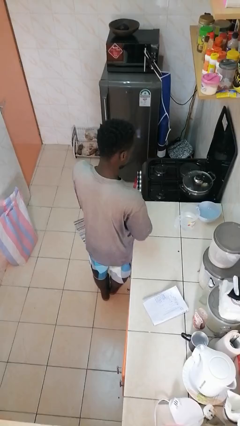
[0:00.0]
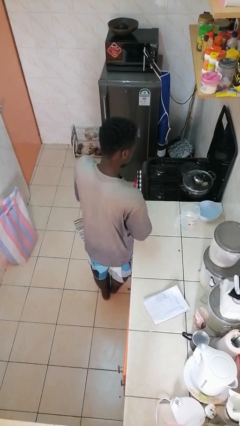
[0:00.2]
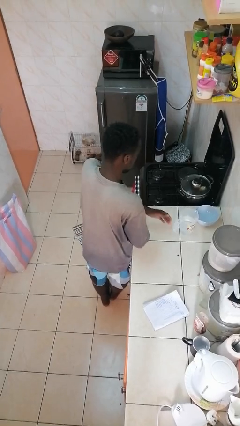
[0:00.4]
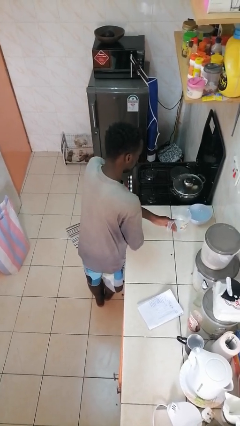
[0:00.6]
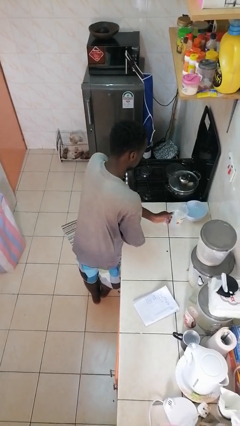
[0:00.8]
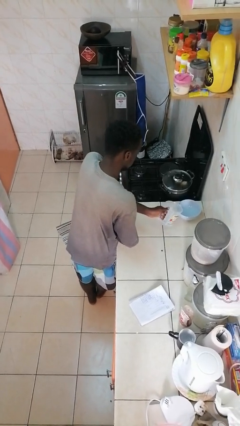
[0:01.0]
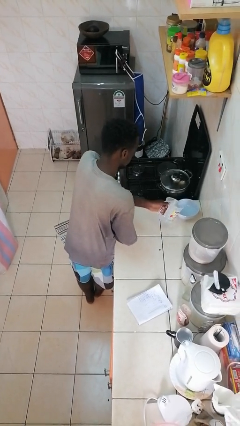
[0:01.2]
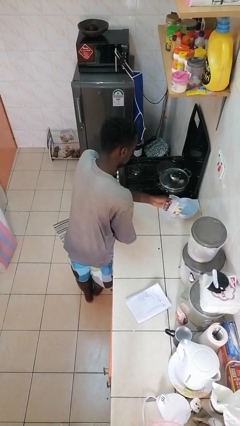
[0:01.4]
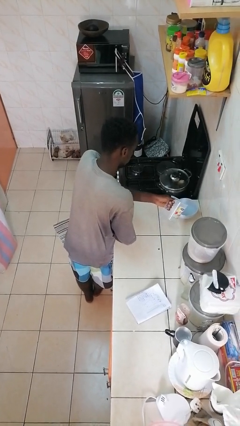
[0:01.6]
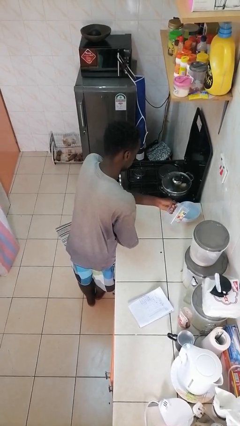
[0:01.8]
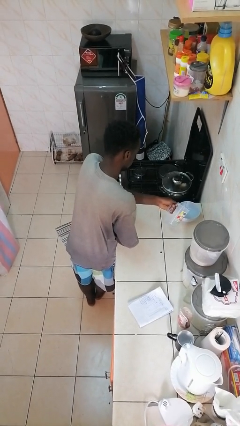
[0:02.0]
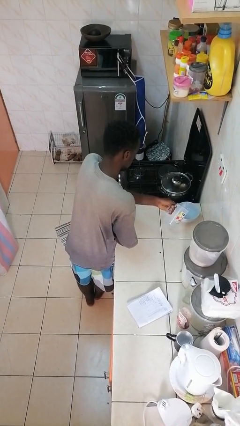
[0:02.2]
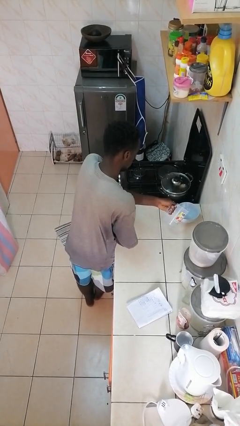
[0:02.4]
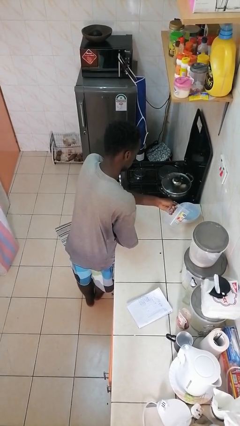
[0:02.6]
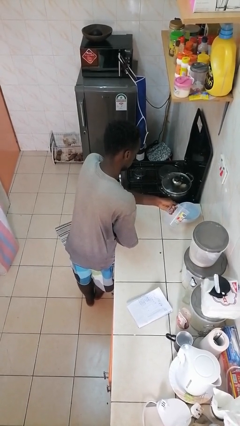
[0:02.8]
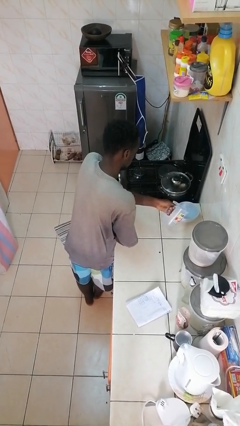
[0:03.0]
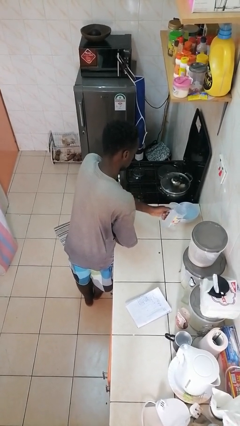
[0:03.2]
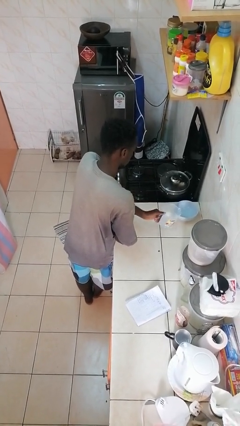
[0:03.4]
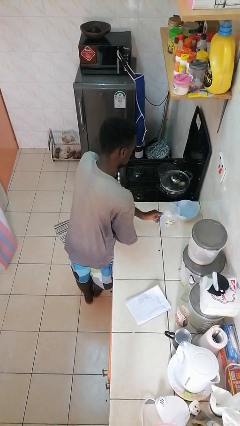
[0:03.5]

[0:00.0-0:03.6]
person pours into bowl

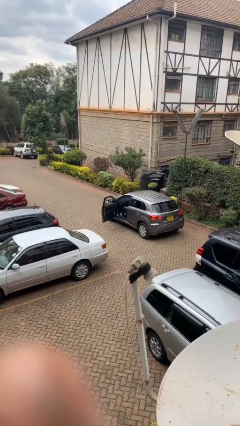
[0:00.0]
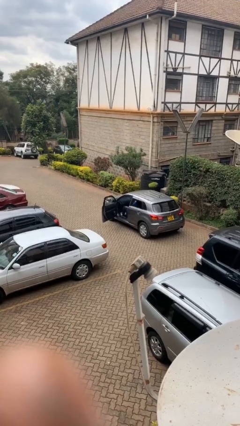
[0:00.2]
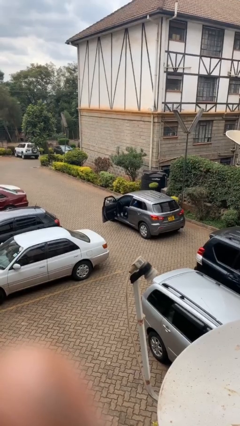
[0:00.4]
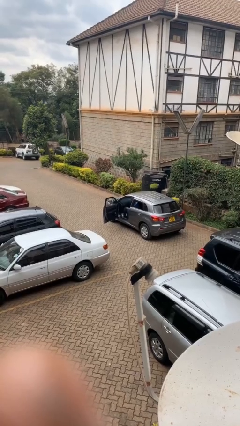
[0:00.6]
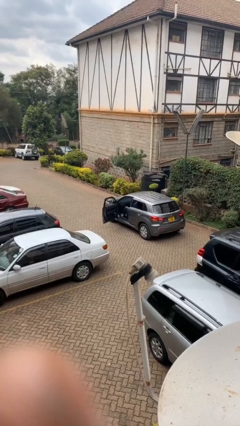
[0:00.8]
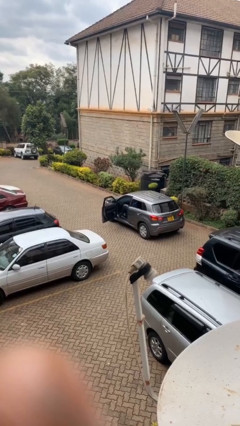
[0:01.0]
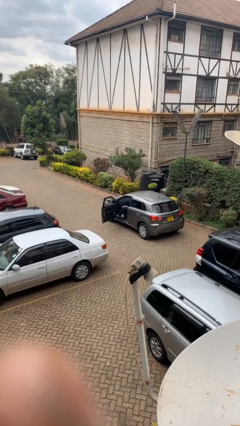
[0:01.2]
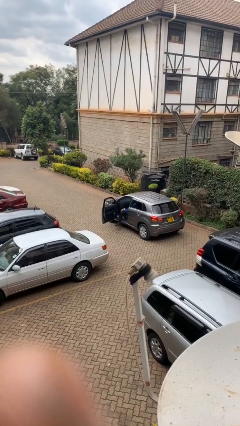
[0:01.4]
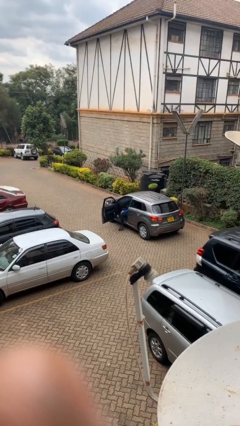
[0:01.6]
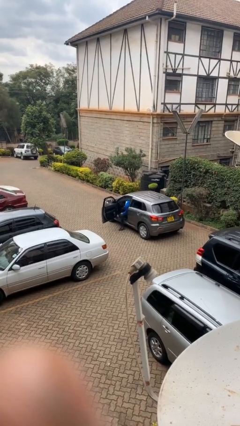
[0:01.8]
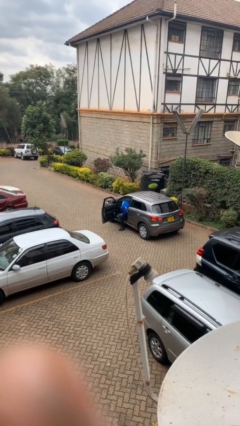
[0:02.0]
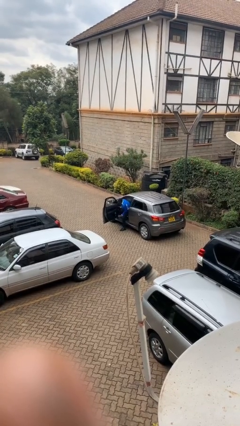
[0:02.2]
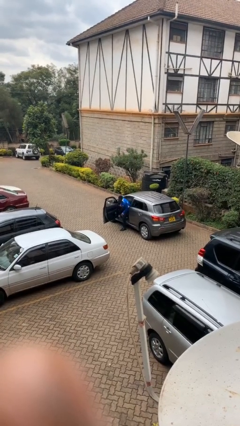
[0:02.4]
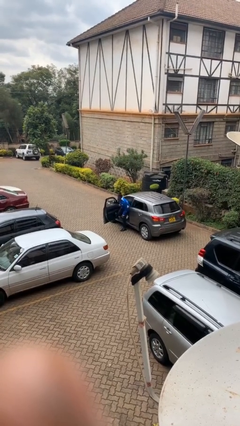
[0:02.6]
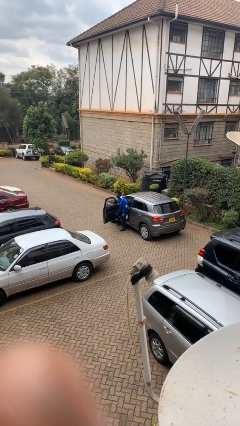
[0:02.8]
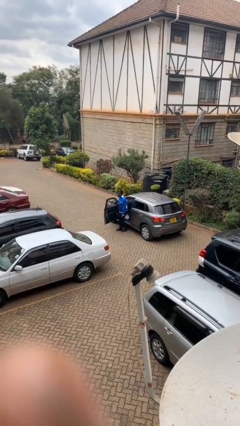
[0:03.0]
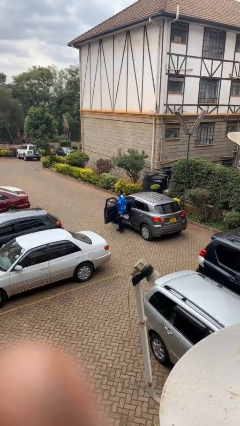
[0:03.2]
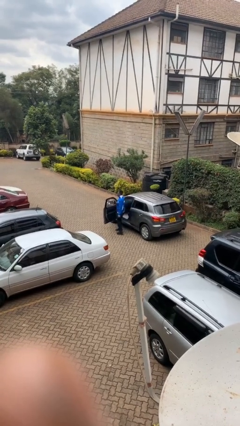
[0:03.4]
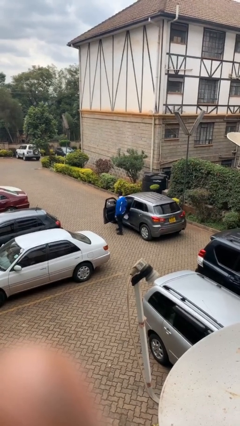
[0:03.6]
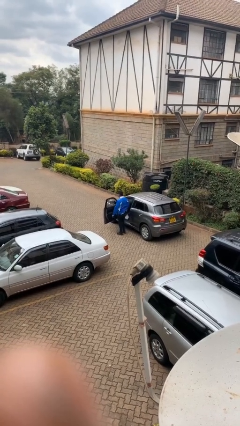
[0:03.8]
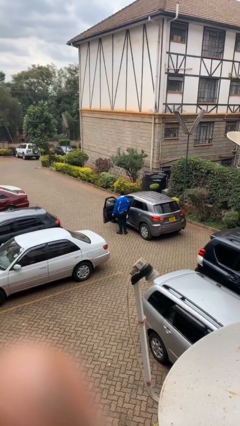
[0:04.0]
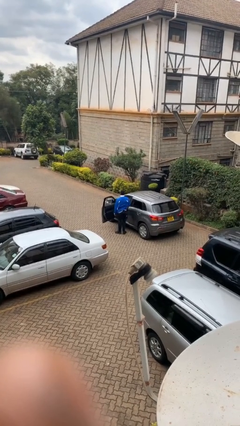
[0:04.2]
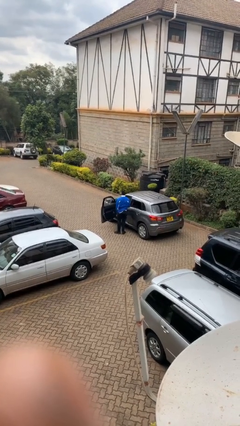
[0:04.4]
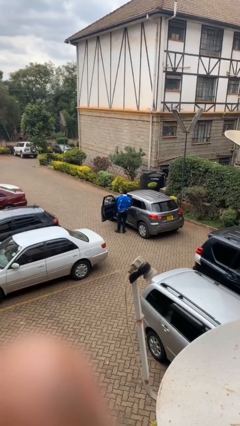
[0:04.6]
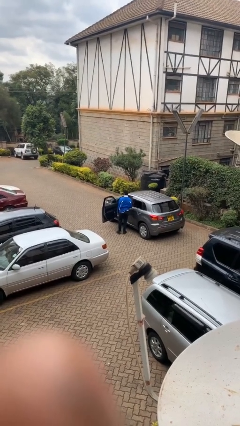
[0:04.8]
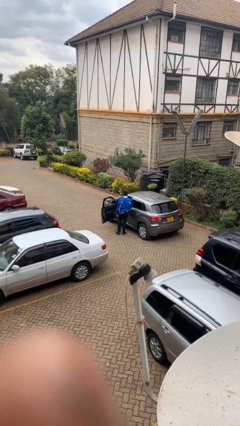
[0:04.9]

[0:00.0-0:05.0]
person exits car

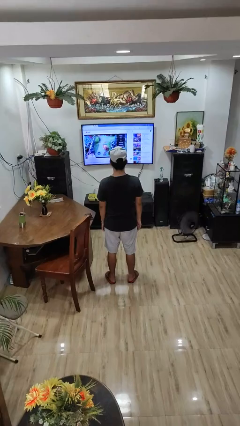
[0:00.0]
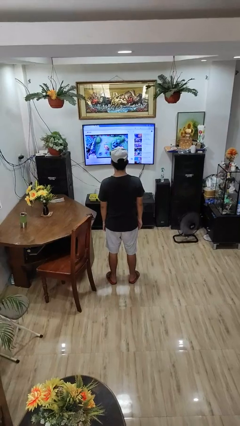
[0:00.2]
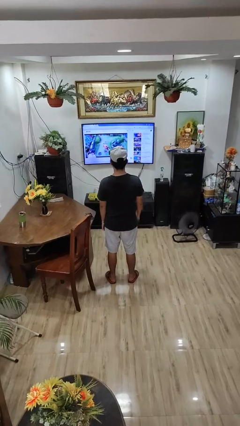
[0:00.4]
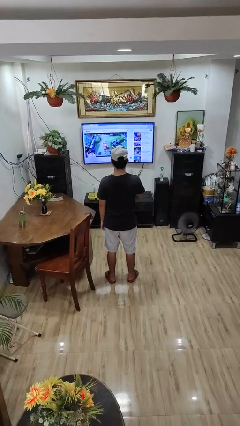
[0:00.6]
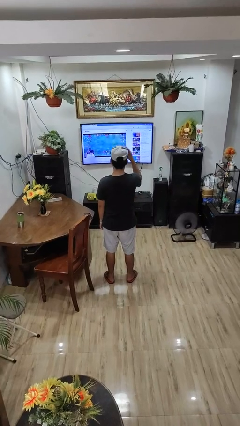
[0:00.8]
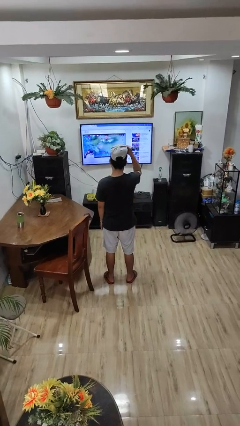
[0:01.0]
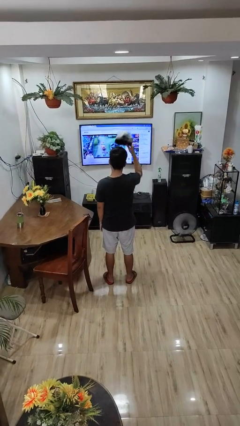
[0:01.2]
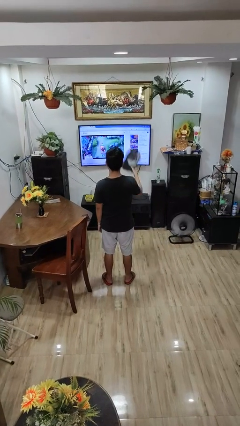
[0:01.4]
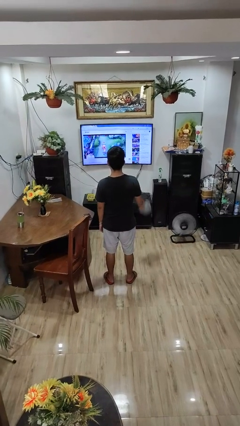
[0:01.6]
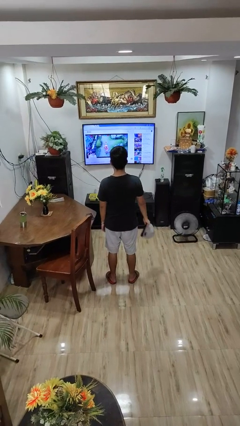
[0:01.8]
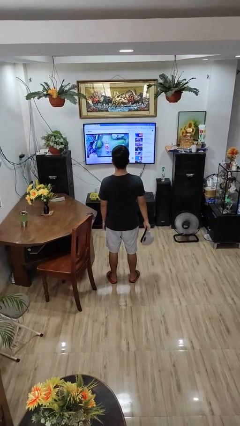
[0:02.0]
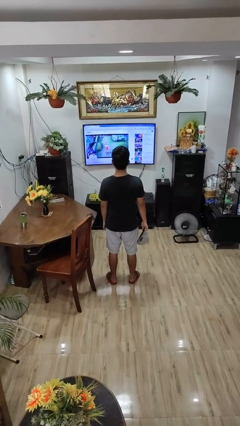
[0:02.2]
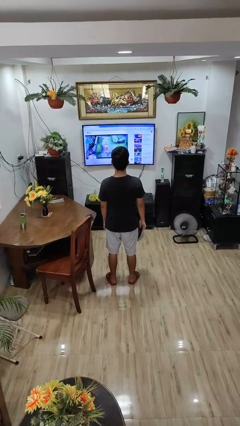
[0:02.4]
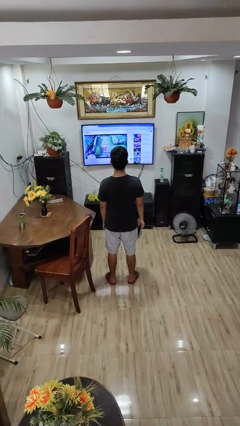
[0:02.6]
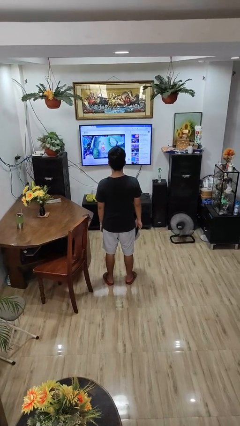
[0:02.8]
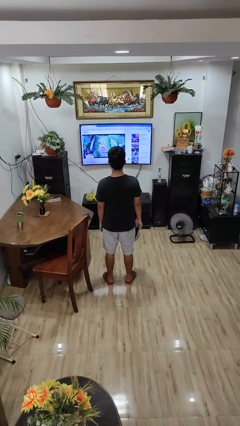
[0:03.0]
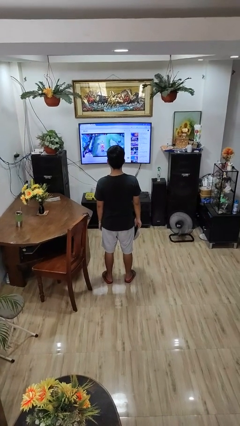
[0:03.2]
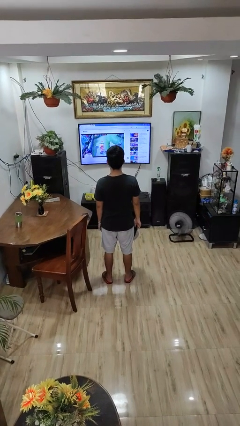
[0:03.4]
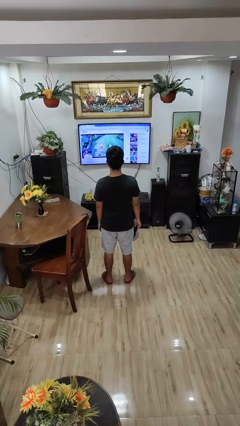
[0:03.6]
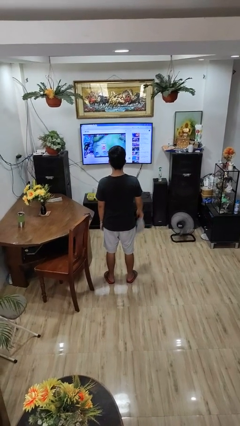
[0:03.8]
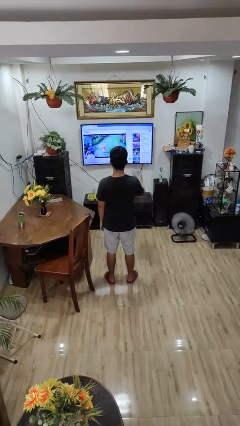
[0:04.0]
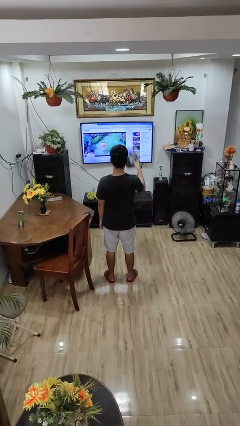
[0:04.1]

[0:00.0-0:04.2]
person sweeps floor

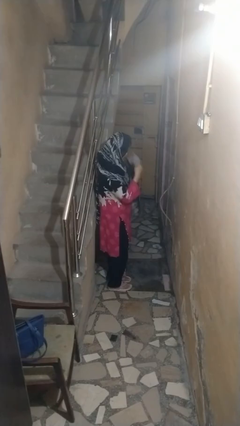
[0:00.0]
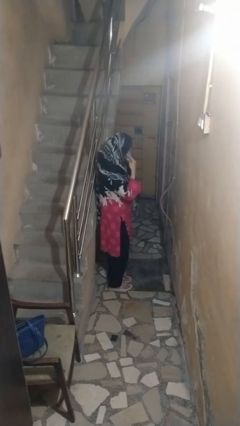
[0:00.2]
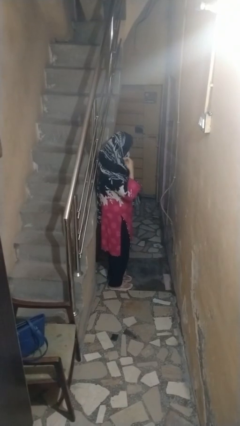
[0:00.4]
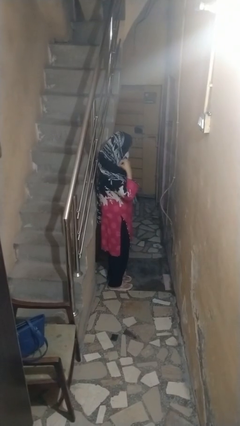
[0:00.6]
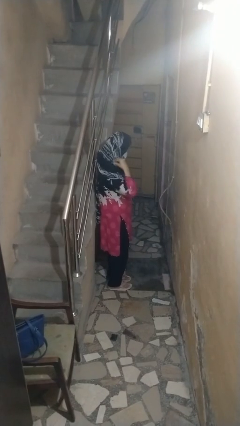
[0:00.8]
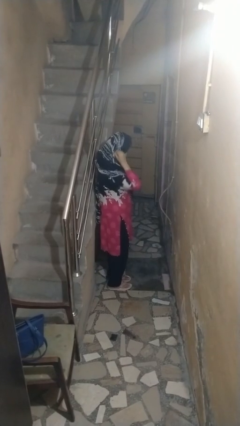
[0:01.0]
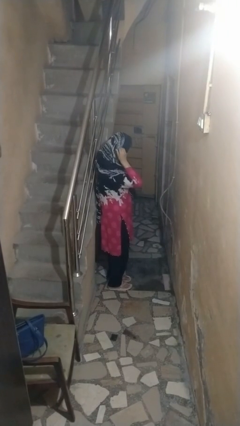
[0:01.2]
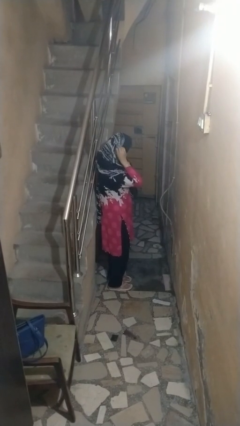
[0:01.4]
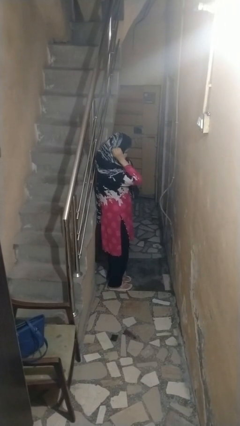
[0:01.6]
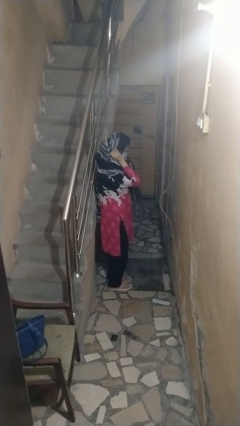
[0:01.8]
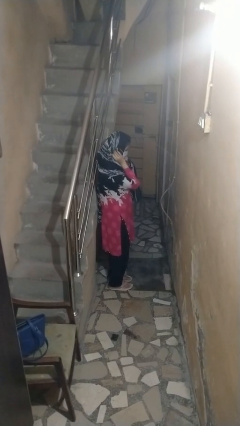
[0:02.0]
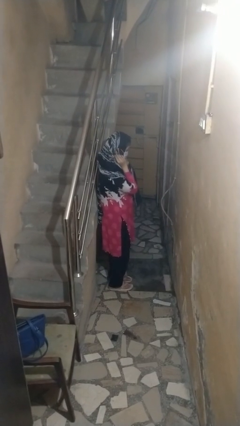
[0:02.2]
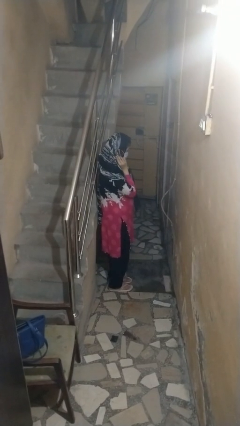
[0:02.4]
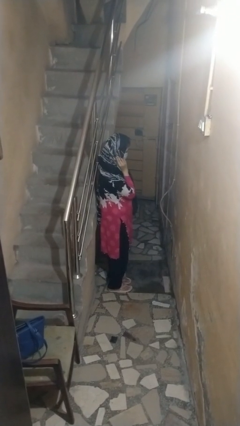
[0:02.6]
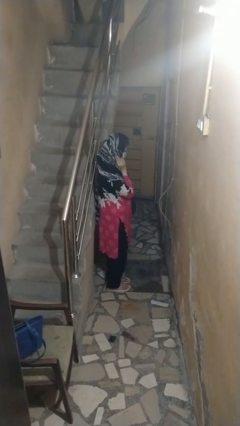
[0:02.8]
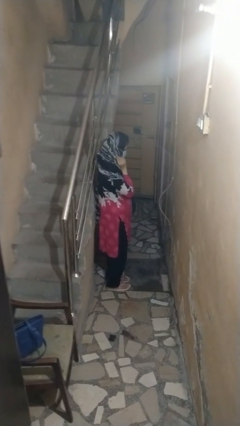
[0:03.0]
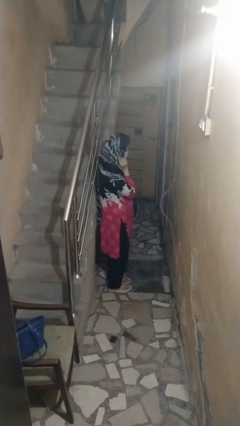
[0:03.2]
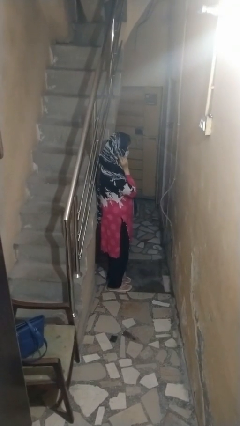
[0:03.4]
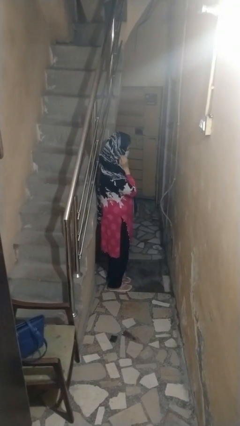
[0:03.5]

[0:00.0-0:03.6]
person puts on facemask

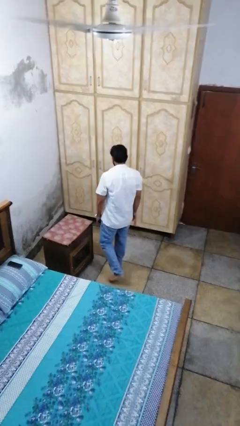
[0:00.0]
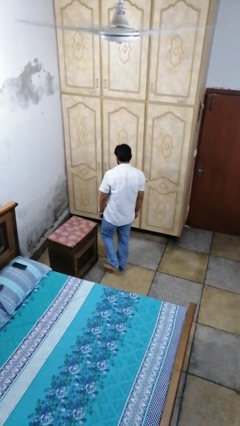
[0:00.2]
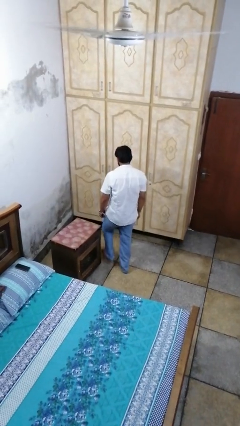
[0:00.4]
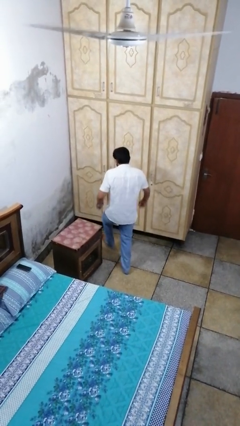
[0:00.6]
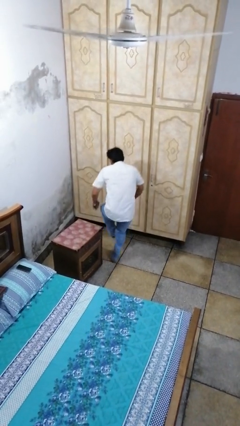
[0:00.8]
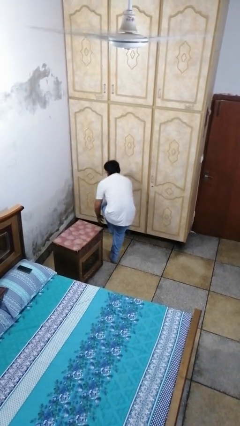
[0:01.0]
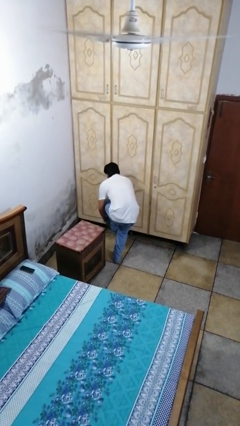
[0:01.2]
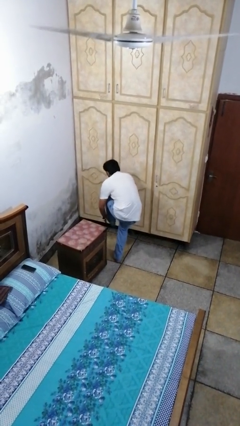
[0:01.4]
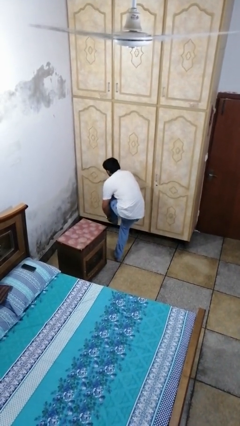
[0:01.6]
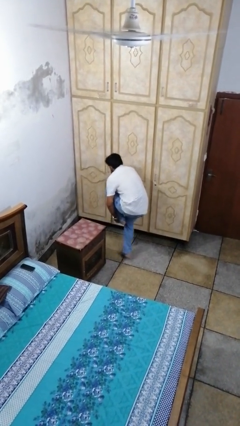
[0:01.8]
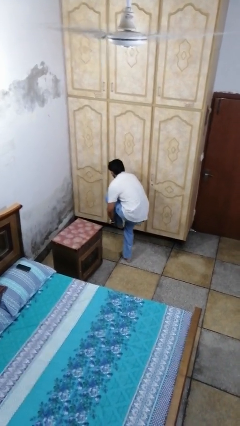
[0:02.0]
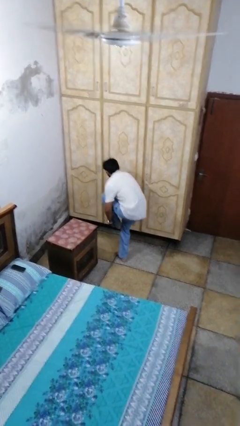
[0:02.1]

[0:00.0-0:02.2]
person stubs toe
